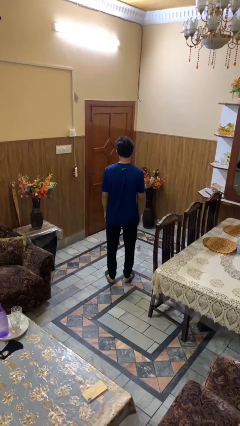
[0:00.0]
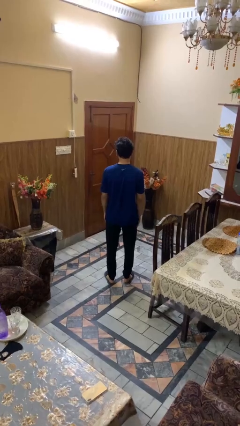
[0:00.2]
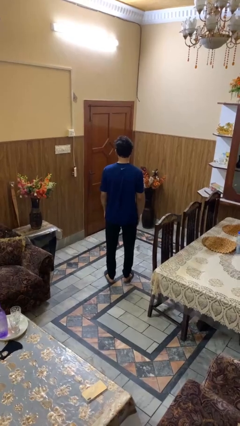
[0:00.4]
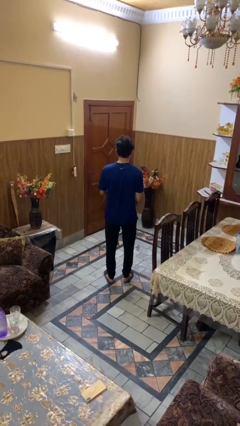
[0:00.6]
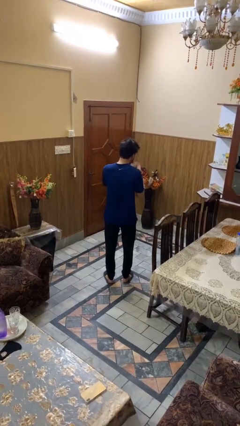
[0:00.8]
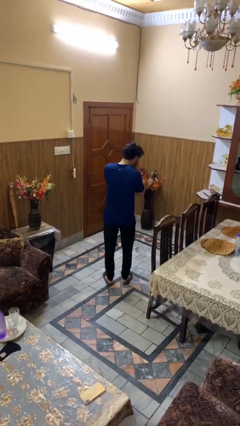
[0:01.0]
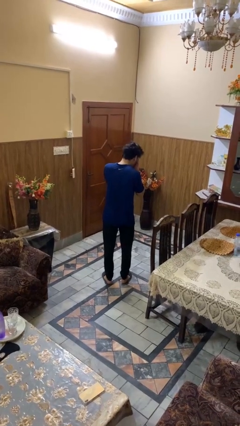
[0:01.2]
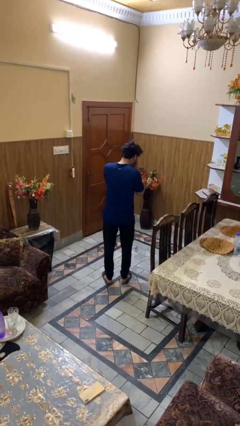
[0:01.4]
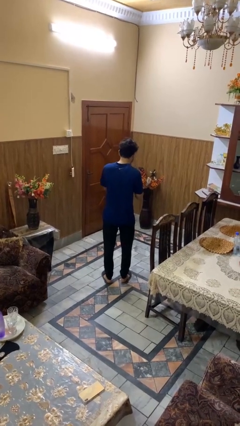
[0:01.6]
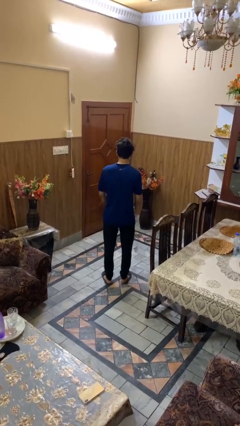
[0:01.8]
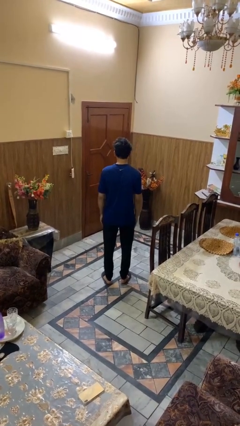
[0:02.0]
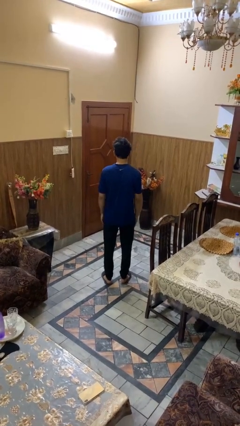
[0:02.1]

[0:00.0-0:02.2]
person sneezes into hand

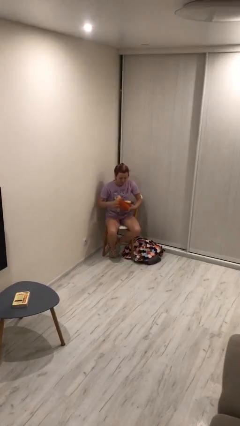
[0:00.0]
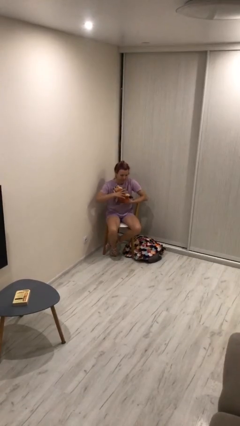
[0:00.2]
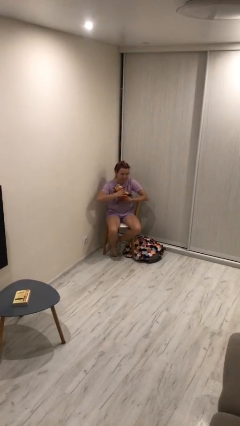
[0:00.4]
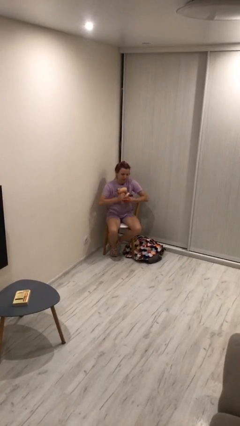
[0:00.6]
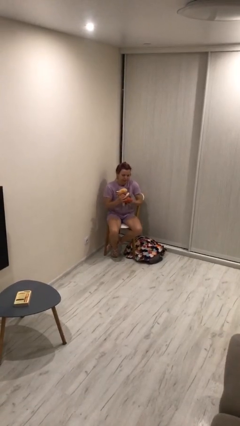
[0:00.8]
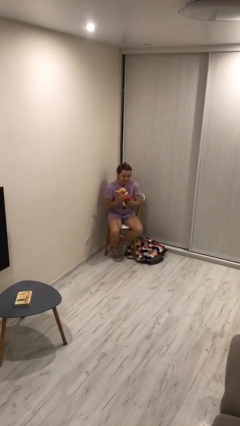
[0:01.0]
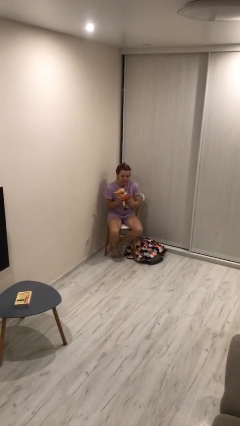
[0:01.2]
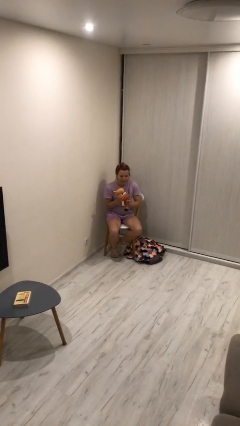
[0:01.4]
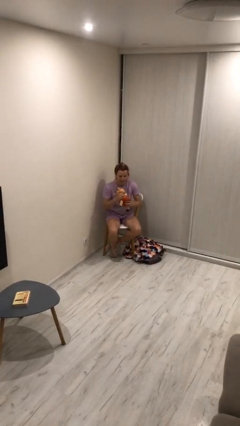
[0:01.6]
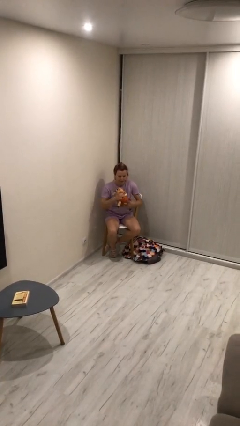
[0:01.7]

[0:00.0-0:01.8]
person squeezes object

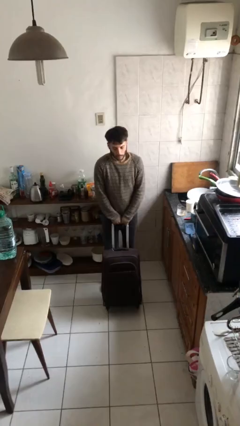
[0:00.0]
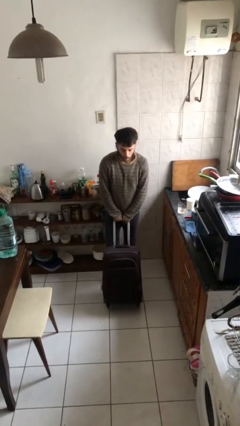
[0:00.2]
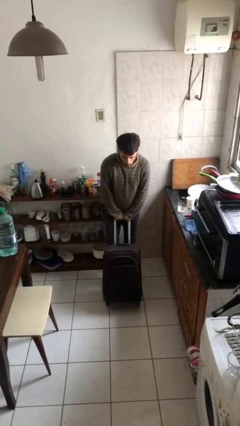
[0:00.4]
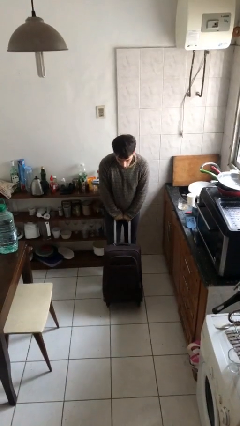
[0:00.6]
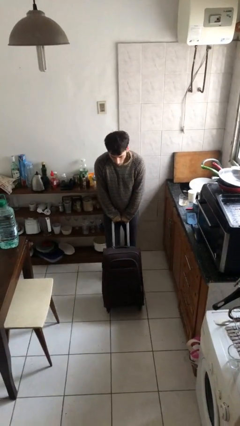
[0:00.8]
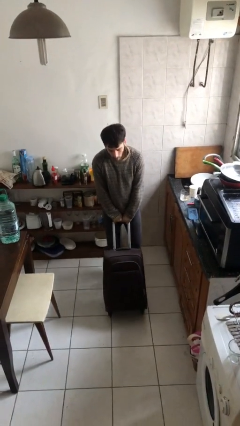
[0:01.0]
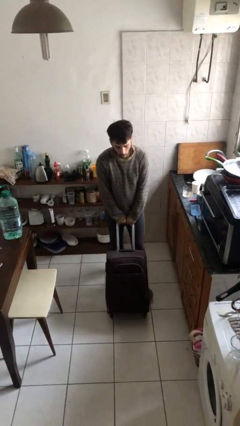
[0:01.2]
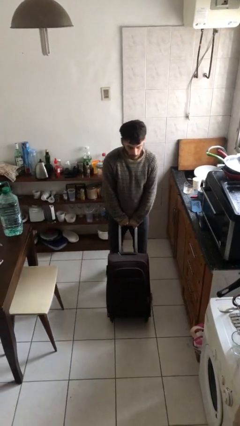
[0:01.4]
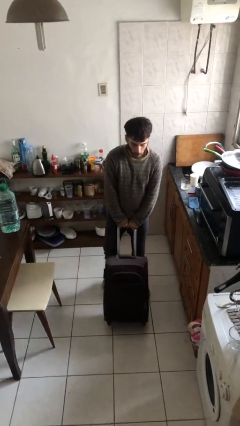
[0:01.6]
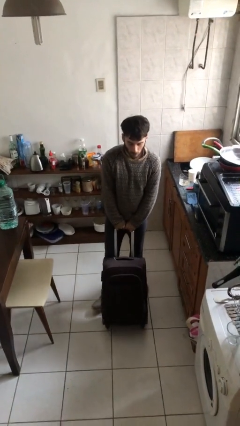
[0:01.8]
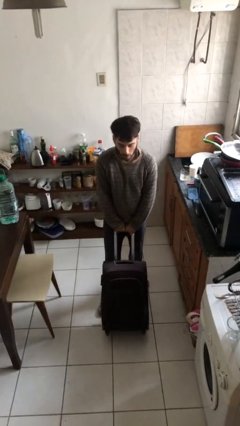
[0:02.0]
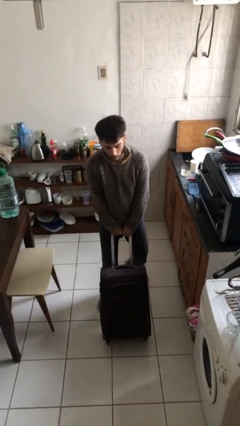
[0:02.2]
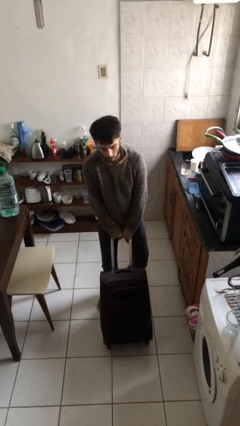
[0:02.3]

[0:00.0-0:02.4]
person pushes wheeled cart

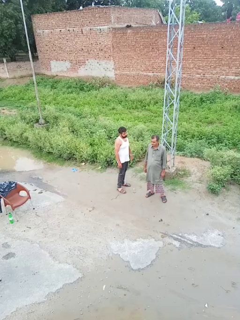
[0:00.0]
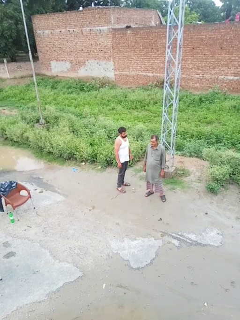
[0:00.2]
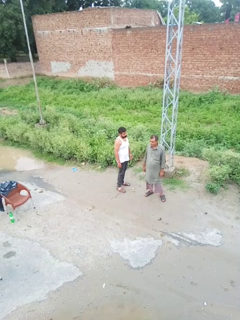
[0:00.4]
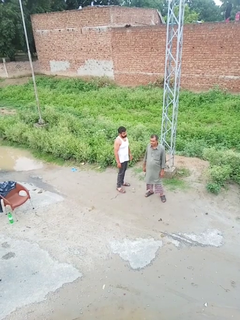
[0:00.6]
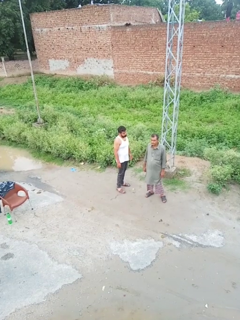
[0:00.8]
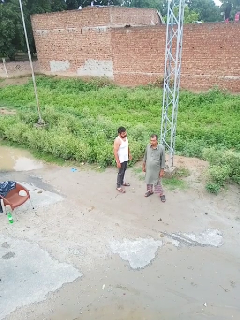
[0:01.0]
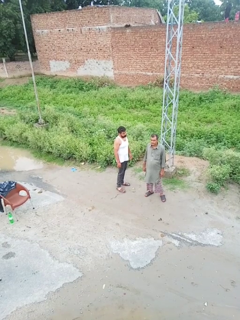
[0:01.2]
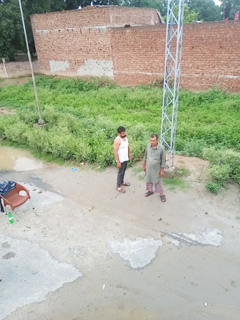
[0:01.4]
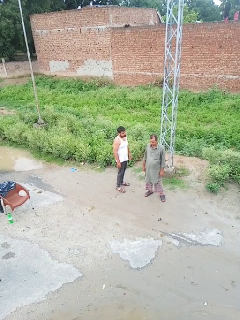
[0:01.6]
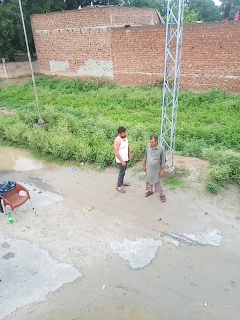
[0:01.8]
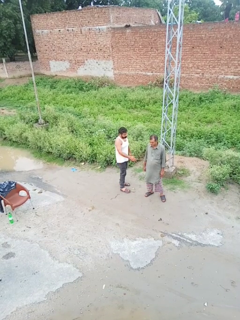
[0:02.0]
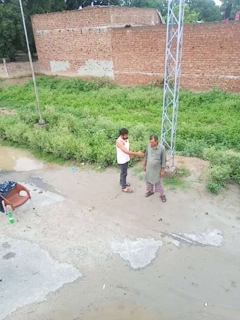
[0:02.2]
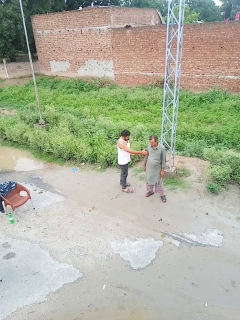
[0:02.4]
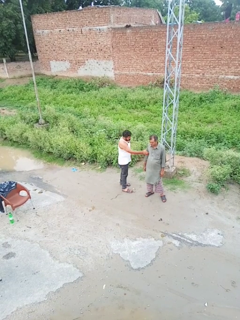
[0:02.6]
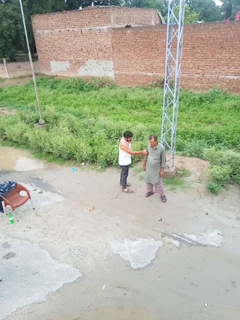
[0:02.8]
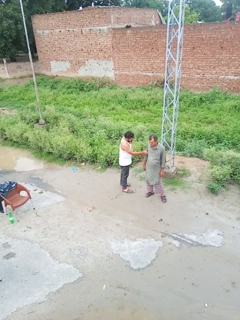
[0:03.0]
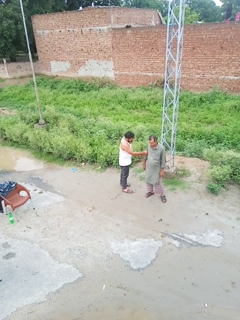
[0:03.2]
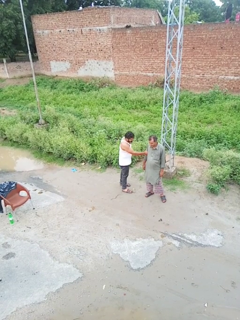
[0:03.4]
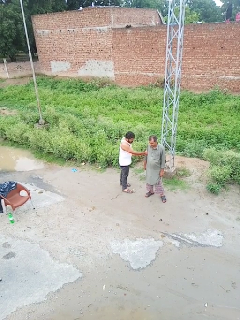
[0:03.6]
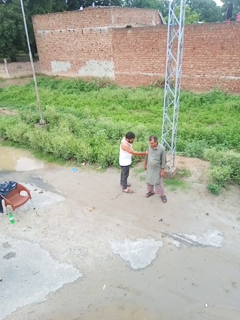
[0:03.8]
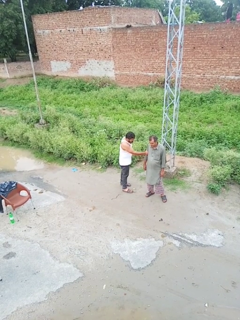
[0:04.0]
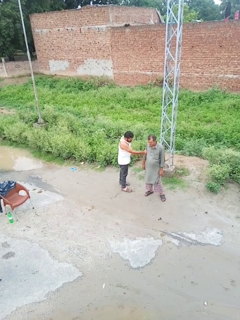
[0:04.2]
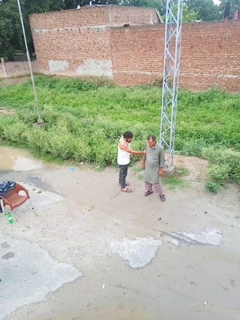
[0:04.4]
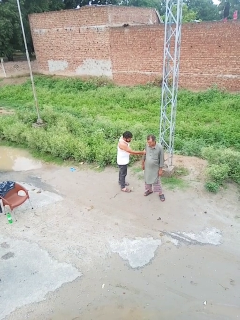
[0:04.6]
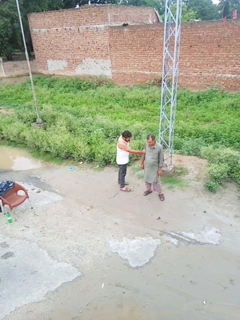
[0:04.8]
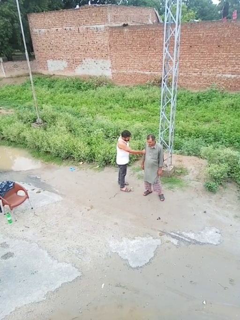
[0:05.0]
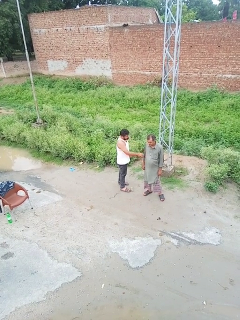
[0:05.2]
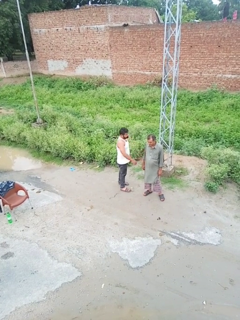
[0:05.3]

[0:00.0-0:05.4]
person grabs person by bicep

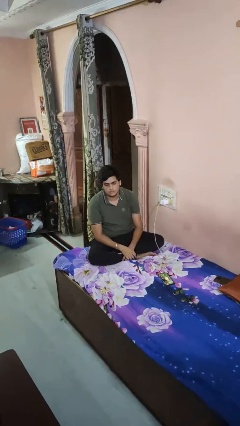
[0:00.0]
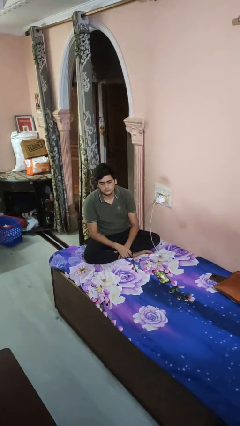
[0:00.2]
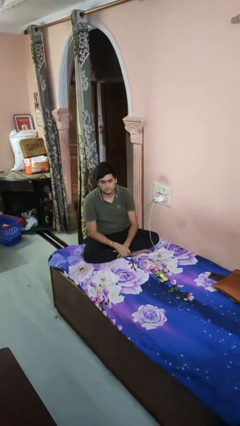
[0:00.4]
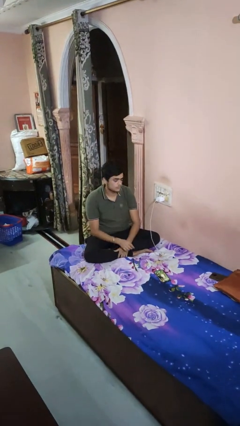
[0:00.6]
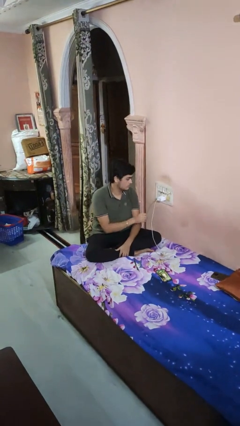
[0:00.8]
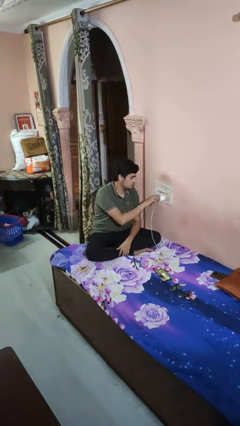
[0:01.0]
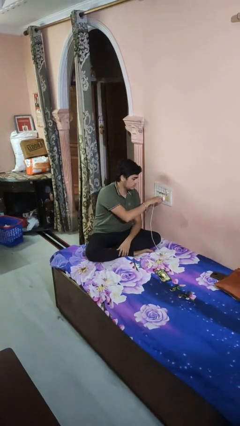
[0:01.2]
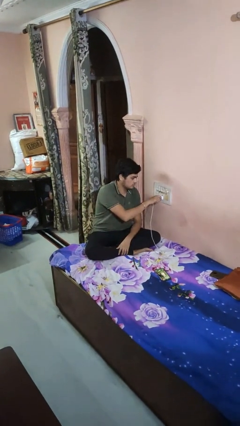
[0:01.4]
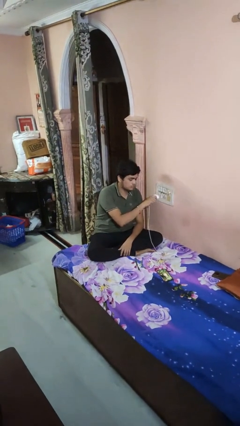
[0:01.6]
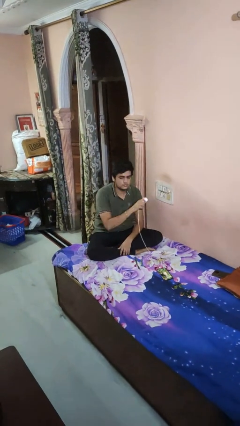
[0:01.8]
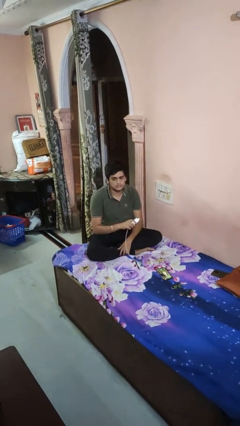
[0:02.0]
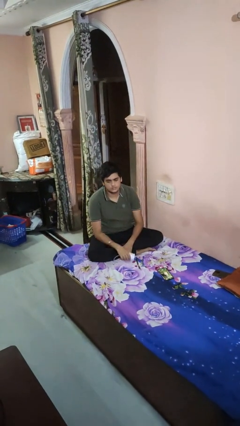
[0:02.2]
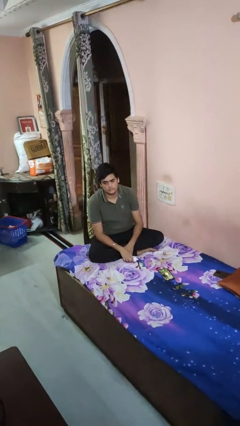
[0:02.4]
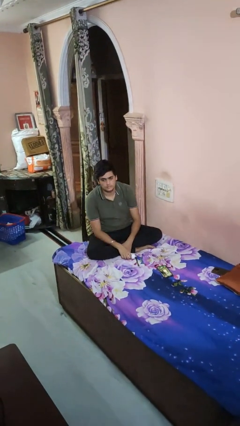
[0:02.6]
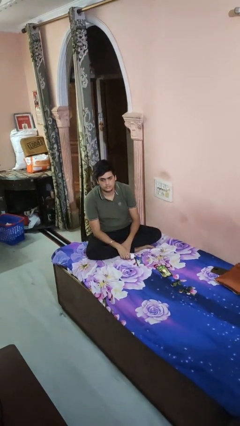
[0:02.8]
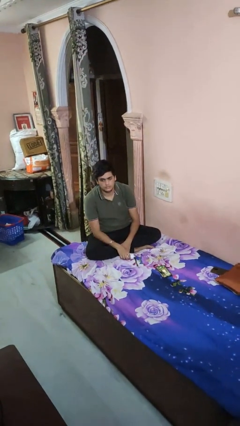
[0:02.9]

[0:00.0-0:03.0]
person unplugs from electrical socket

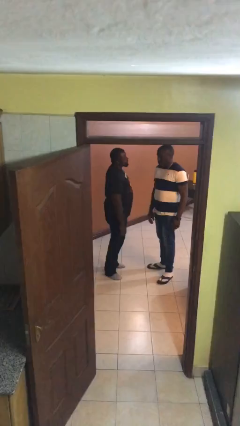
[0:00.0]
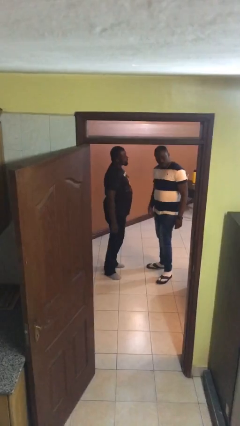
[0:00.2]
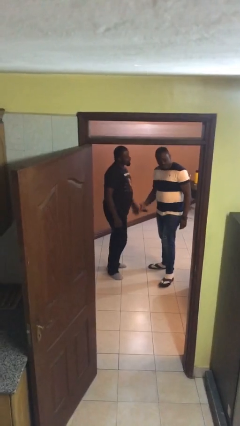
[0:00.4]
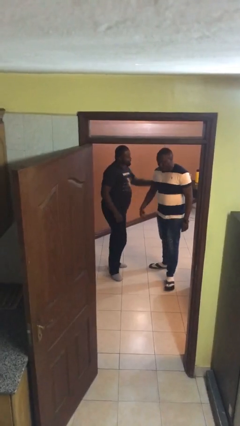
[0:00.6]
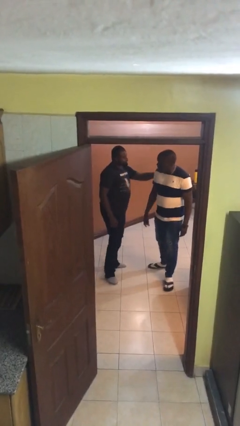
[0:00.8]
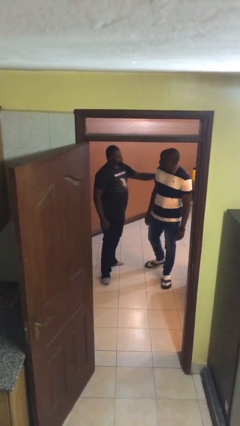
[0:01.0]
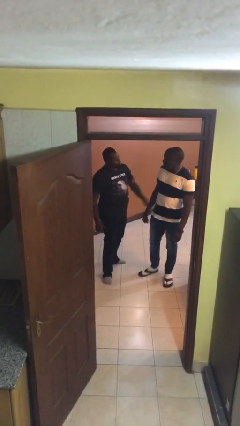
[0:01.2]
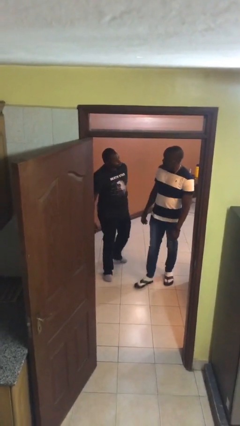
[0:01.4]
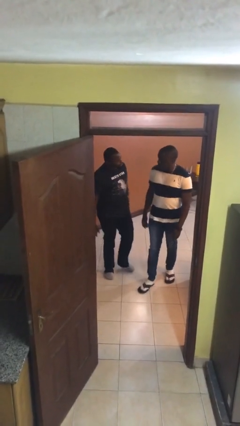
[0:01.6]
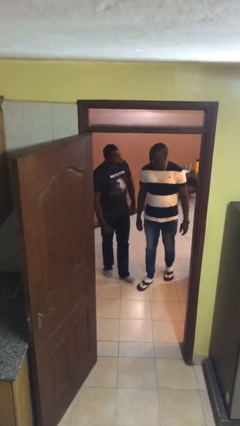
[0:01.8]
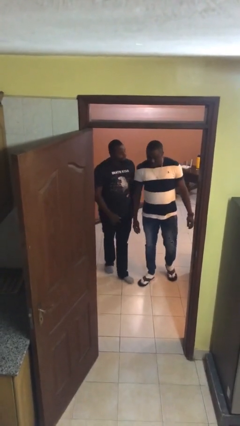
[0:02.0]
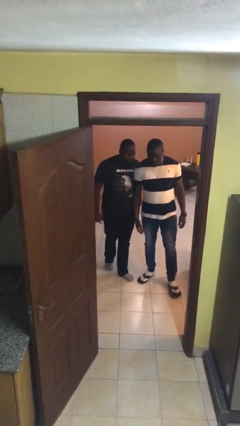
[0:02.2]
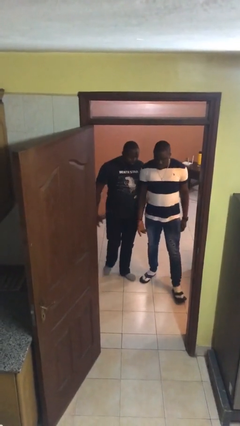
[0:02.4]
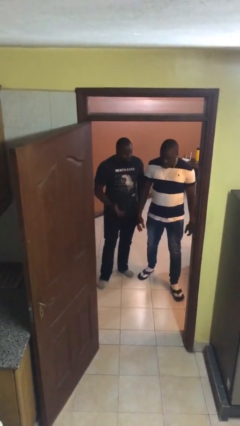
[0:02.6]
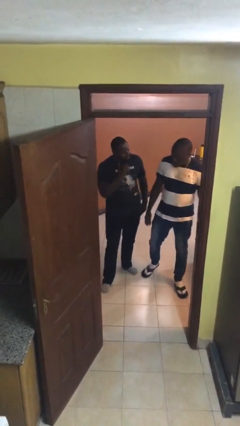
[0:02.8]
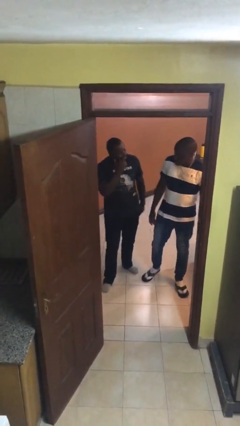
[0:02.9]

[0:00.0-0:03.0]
person talks to person

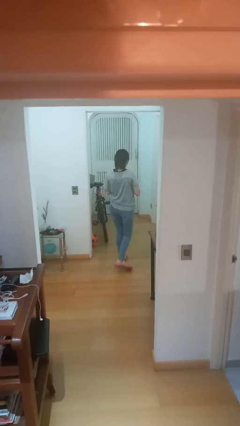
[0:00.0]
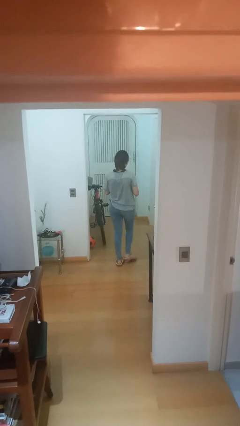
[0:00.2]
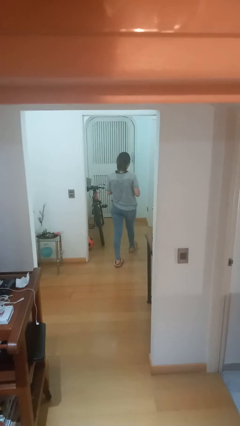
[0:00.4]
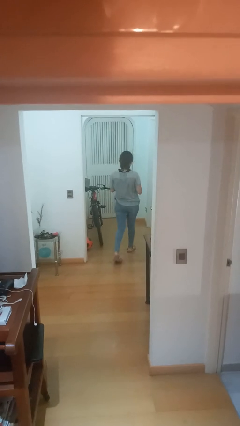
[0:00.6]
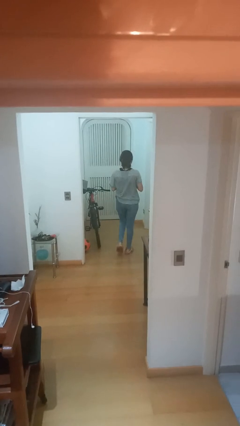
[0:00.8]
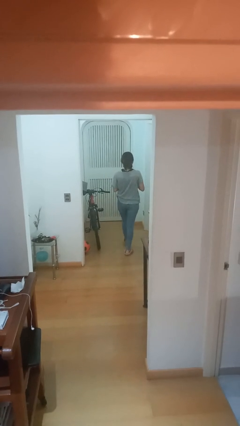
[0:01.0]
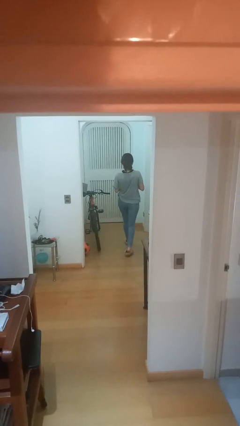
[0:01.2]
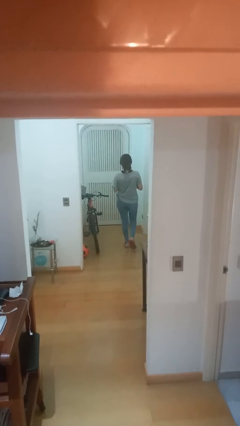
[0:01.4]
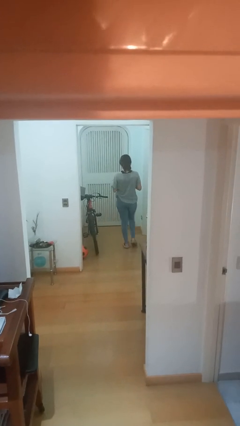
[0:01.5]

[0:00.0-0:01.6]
person exits scene through structure
